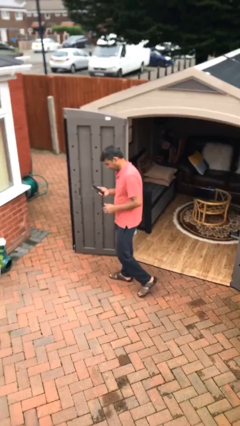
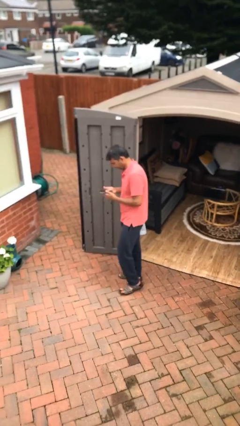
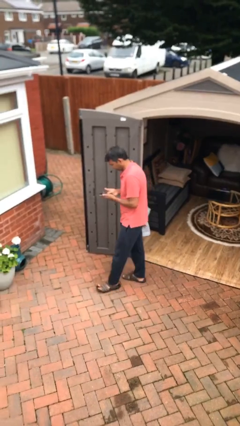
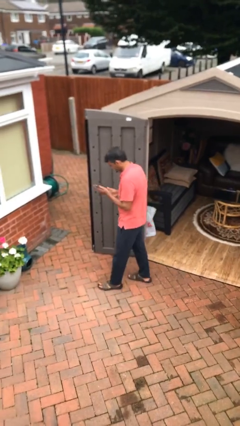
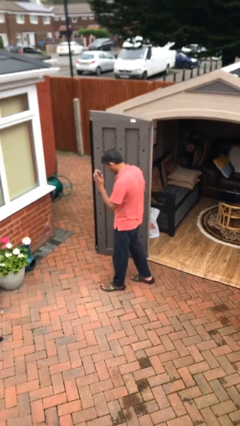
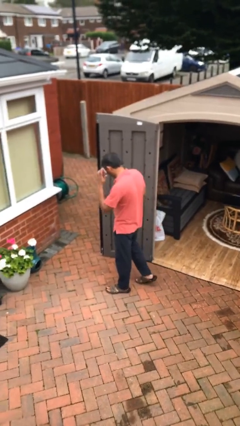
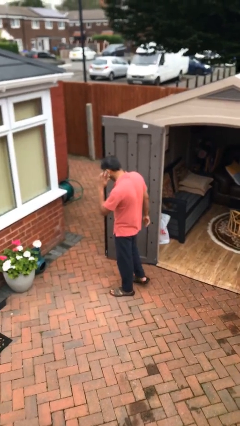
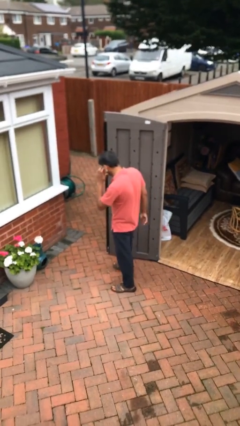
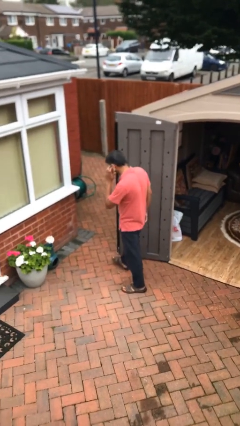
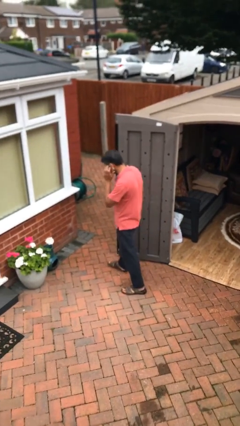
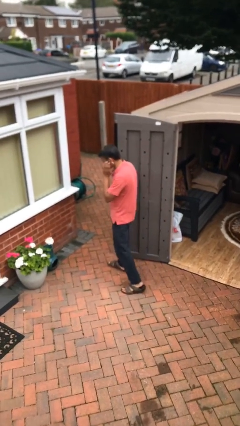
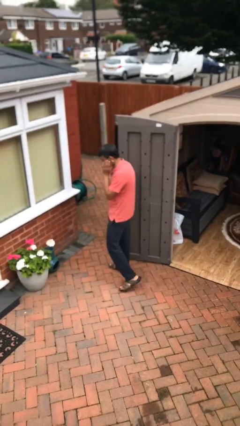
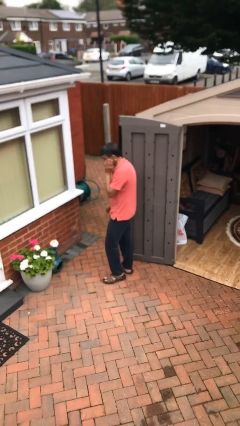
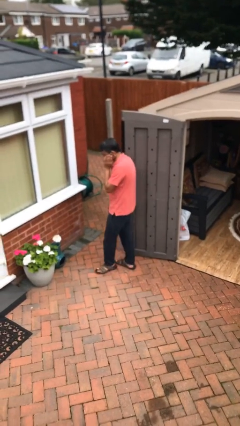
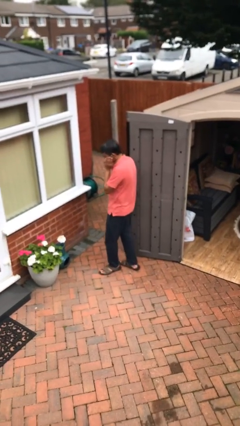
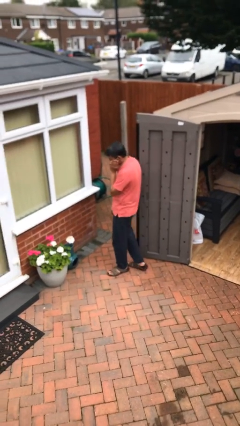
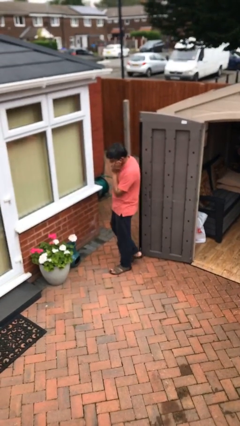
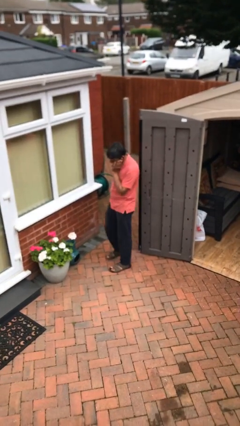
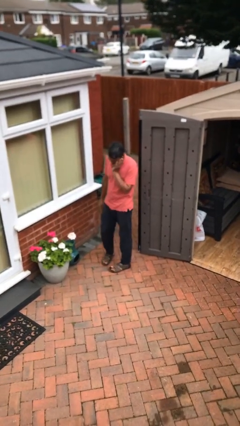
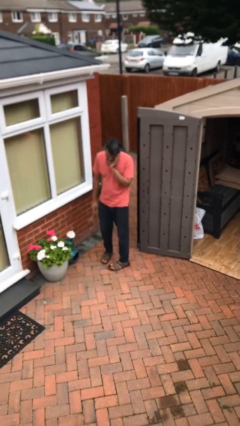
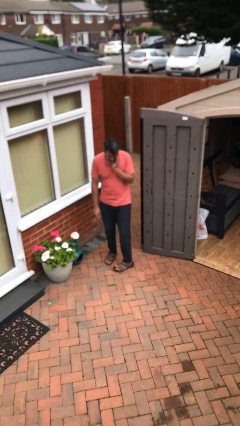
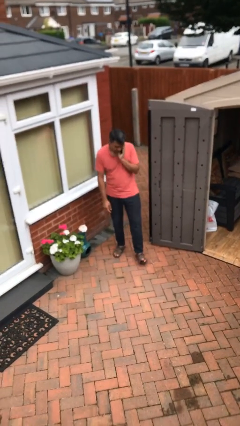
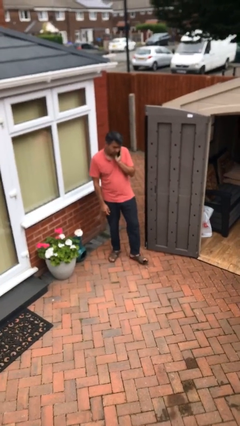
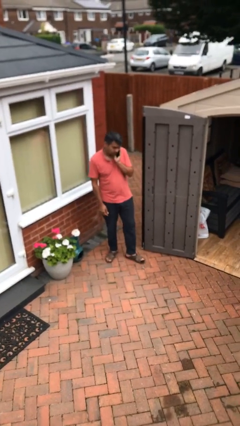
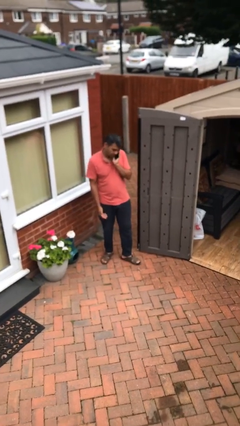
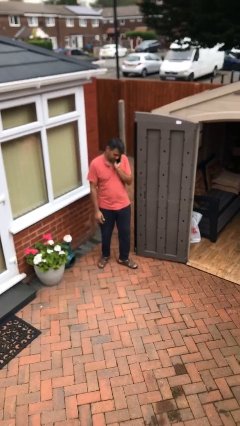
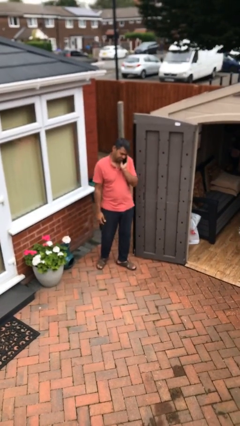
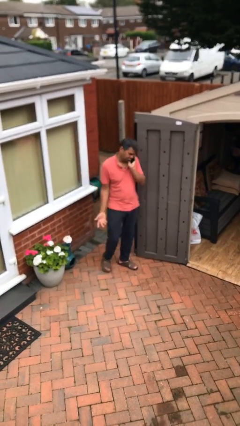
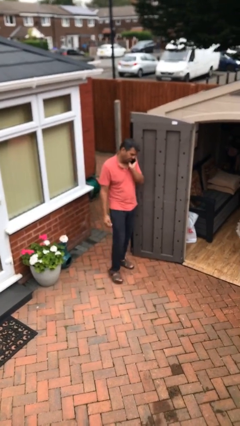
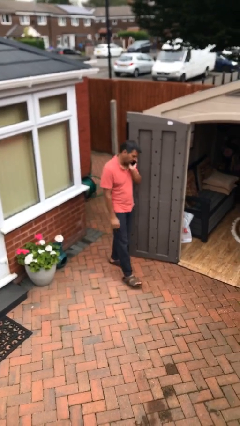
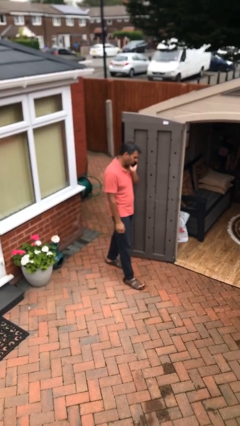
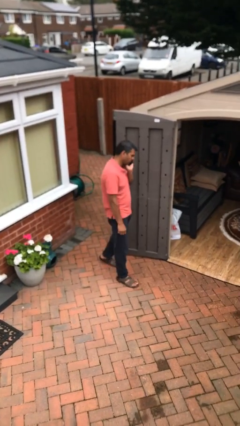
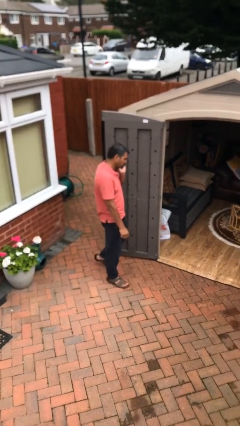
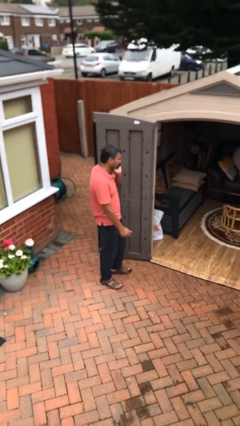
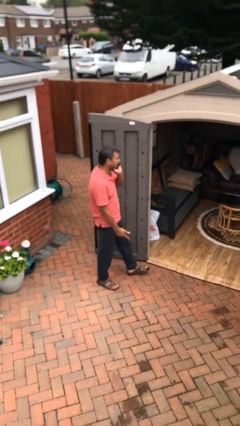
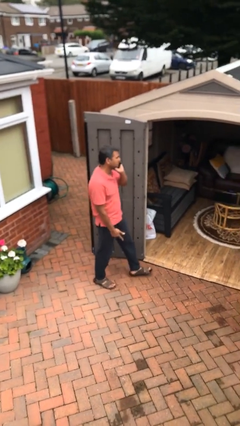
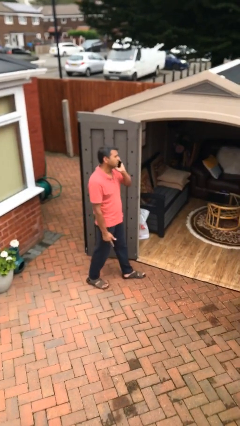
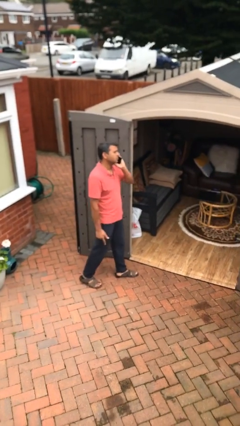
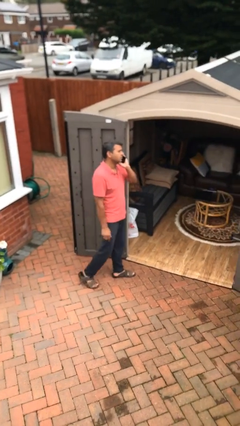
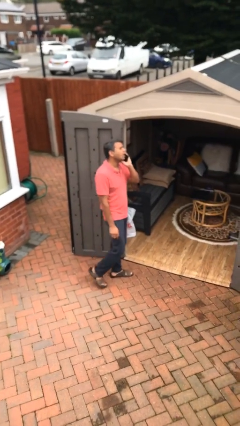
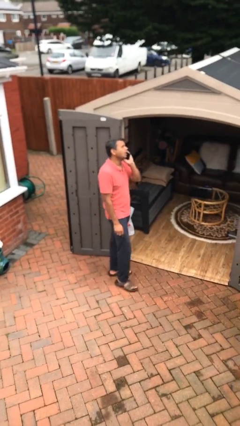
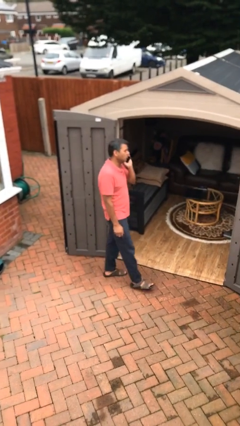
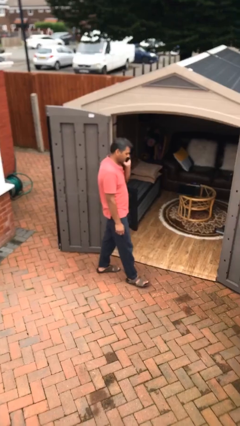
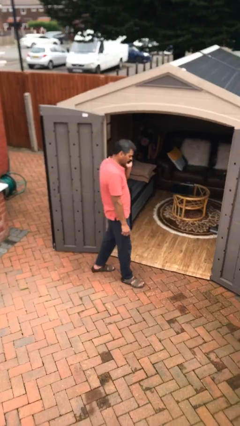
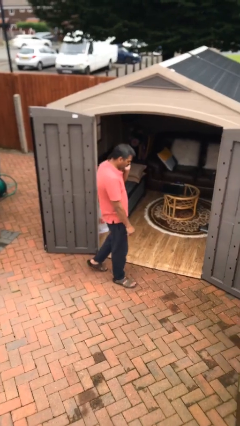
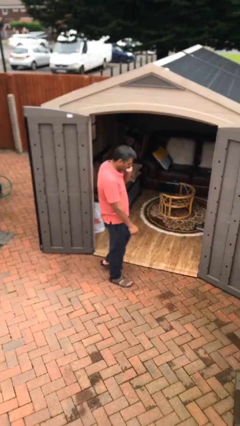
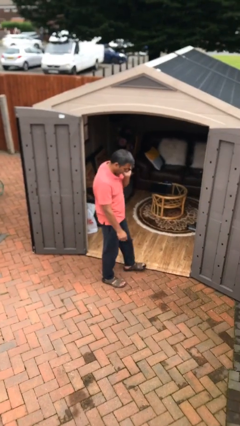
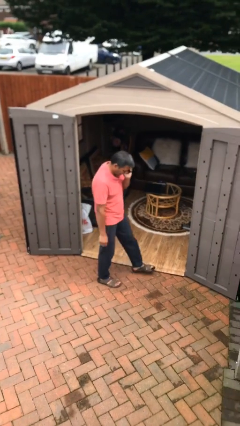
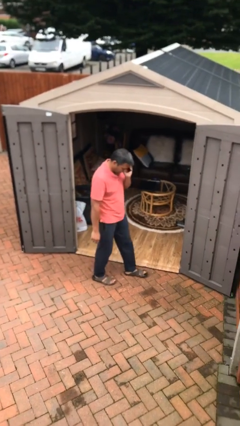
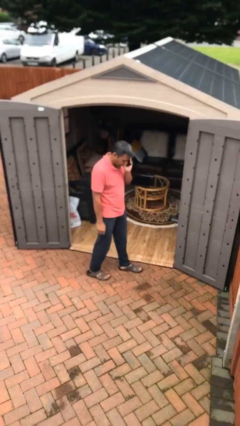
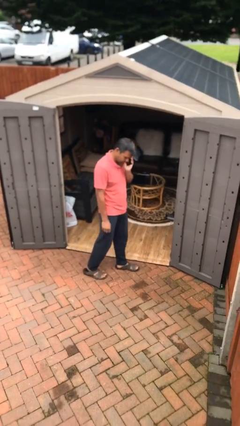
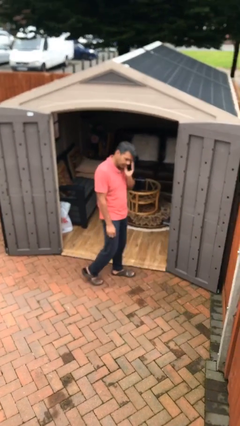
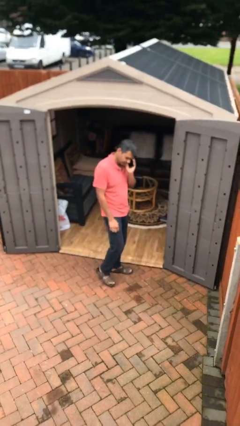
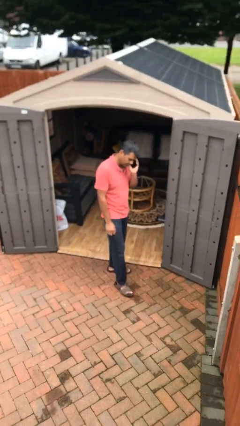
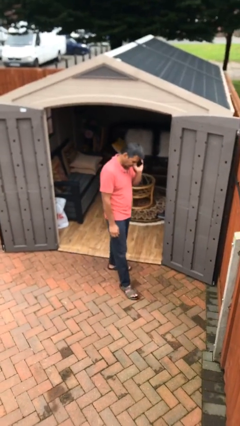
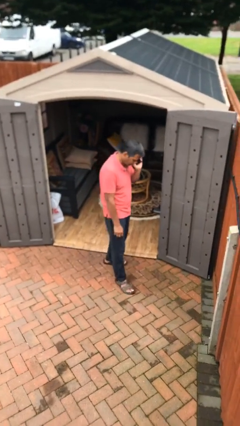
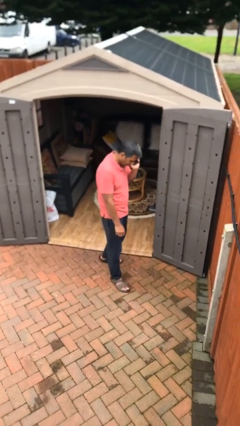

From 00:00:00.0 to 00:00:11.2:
person talks on phone

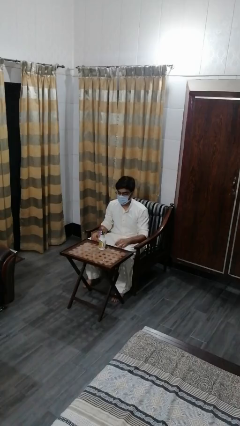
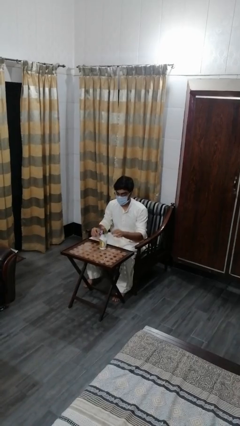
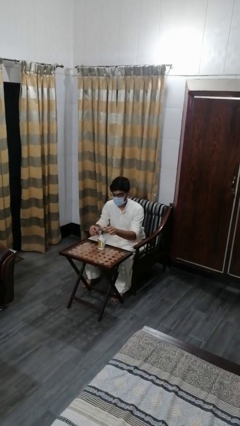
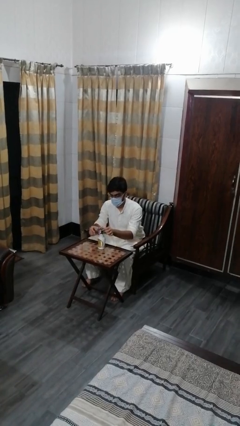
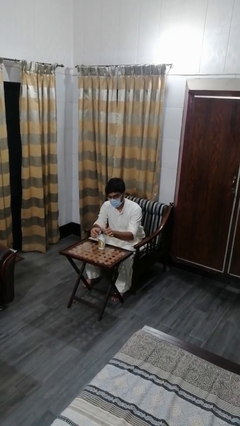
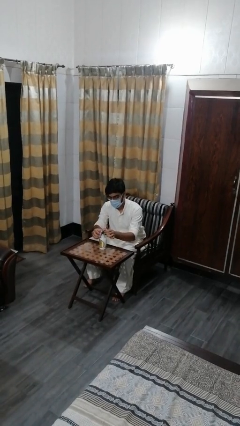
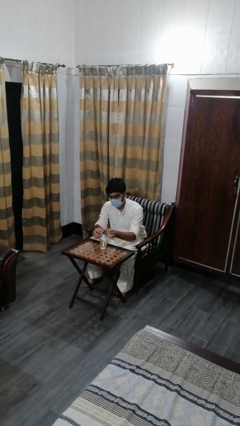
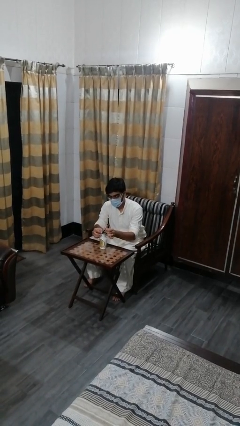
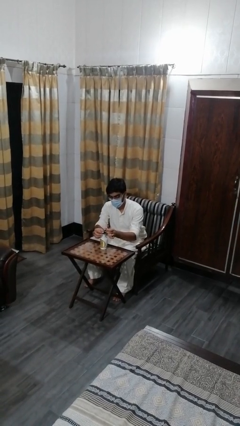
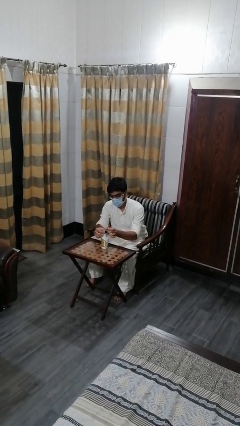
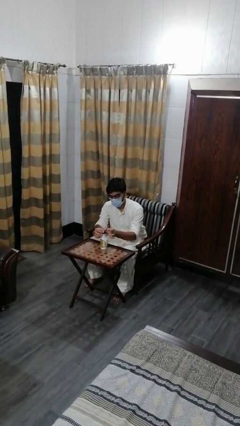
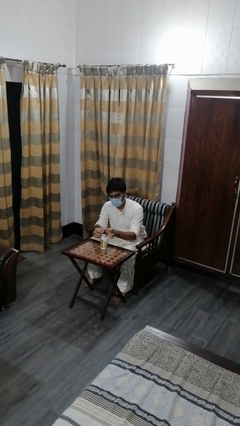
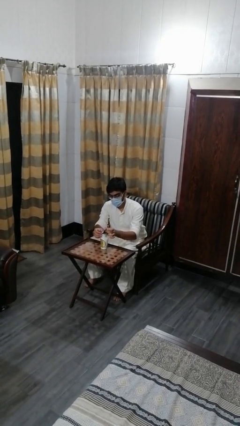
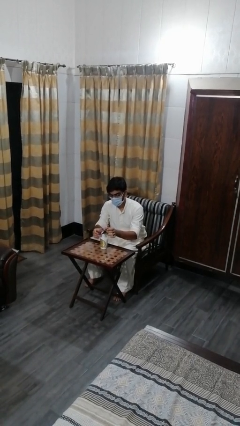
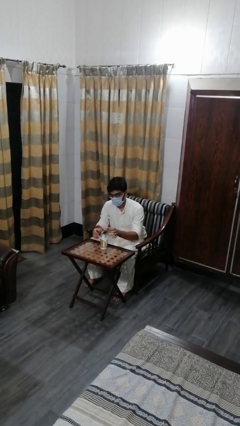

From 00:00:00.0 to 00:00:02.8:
person arranges flowers in vase

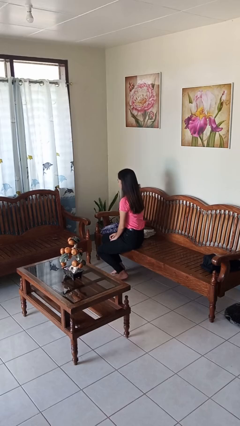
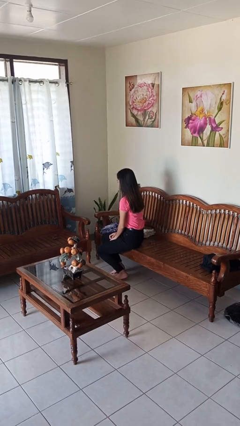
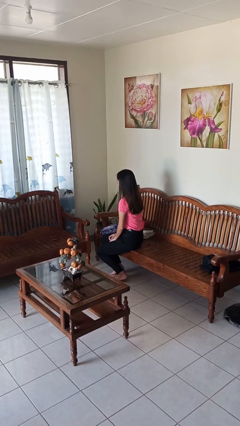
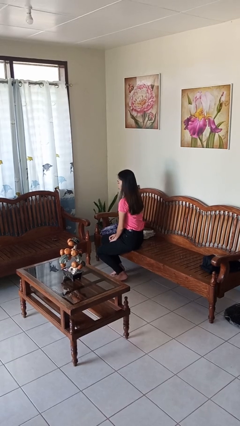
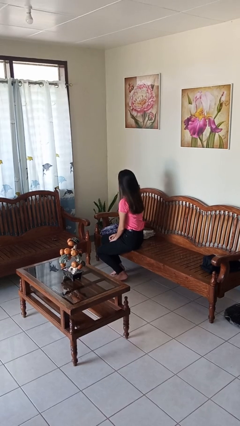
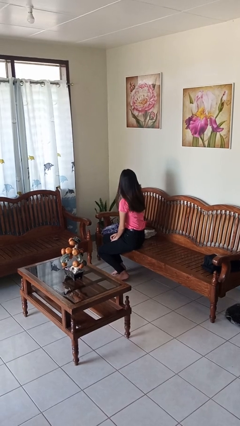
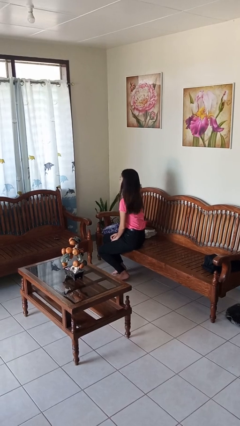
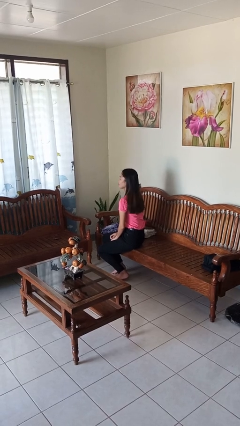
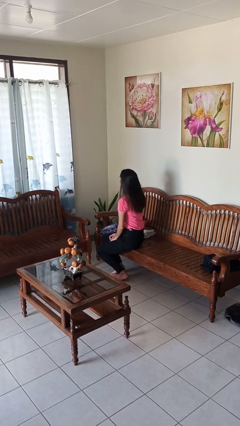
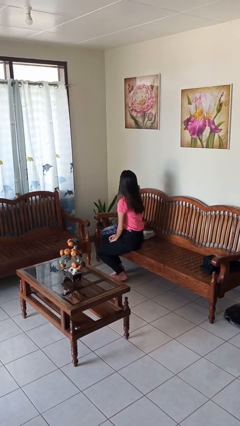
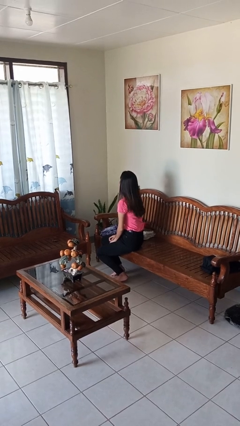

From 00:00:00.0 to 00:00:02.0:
person shakes head

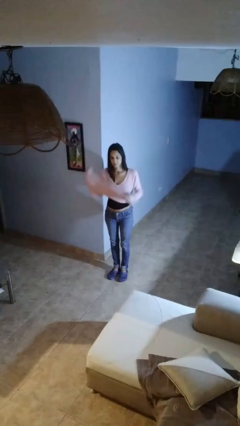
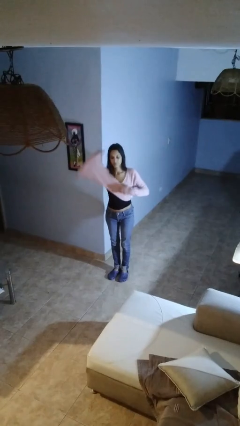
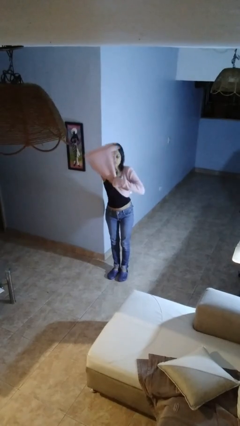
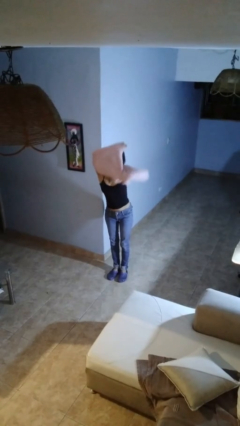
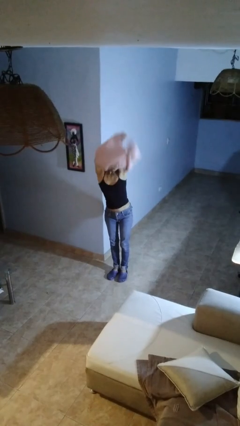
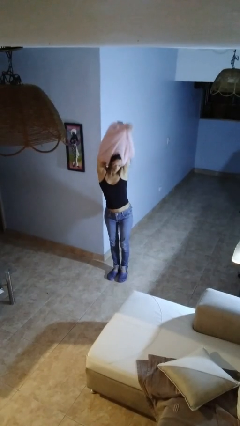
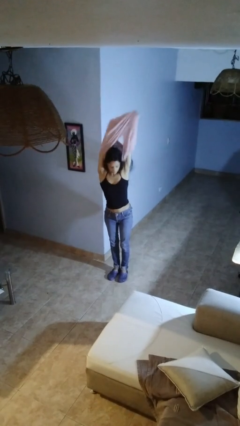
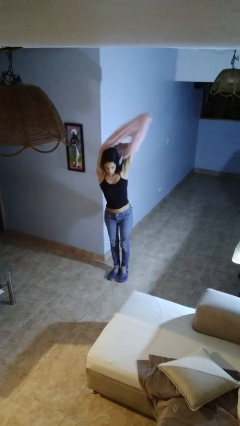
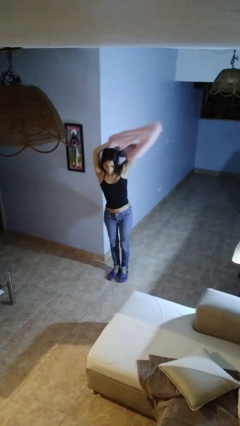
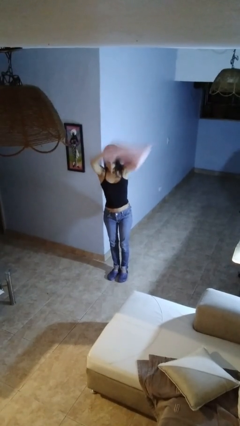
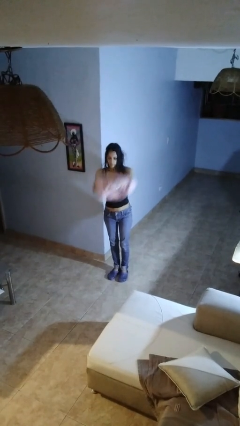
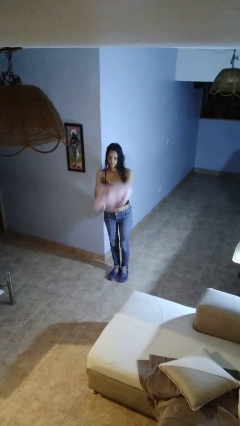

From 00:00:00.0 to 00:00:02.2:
person takes off shirt
